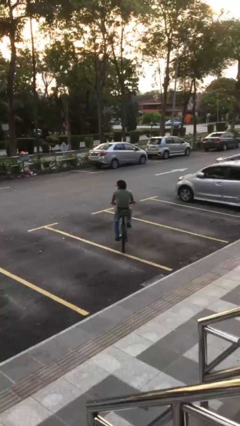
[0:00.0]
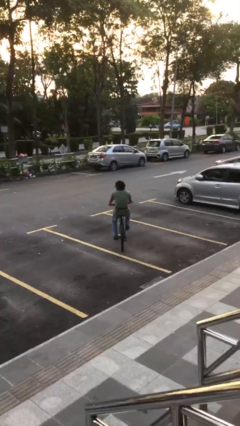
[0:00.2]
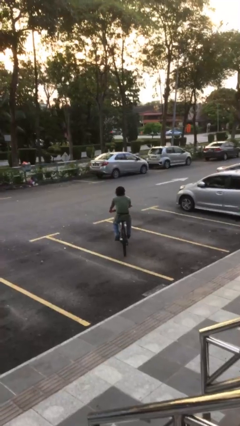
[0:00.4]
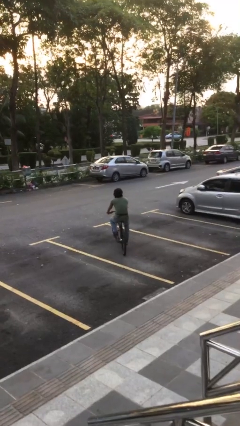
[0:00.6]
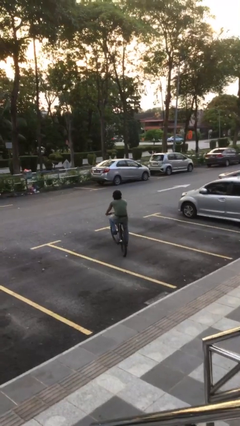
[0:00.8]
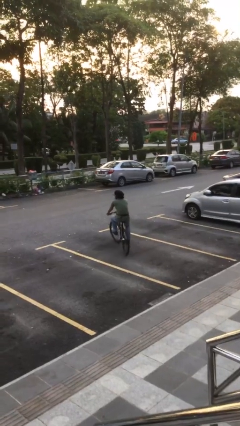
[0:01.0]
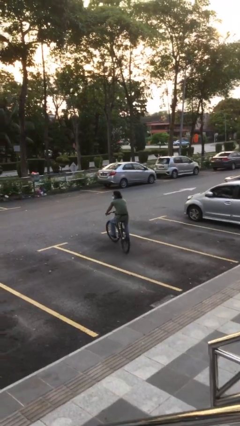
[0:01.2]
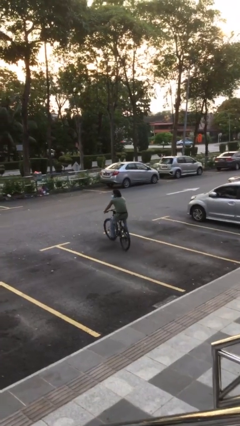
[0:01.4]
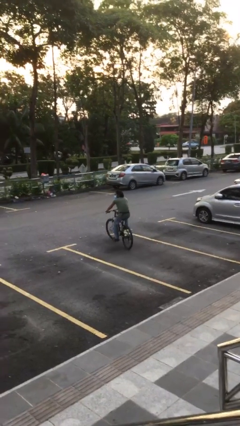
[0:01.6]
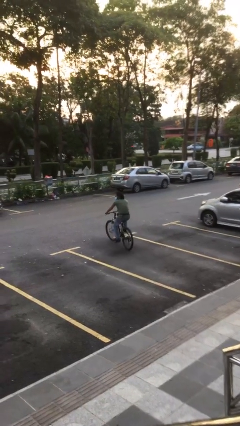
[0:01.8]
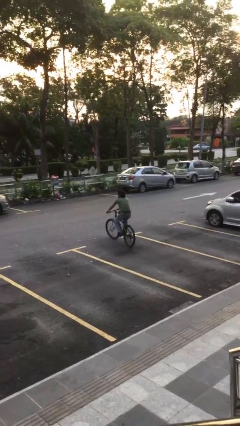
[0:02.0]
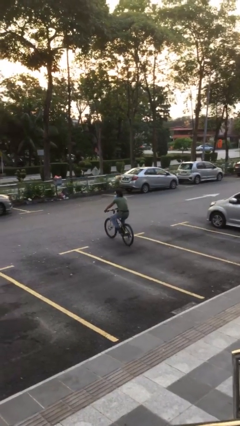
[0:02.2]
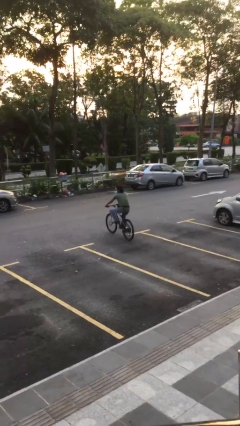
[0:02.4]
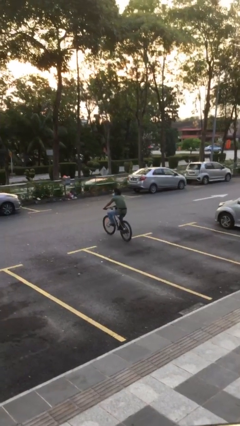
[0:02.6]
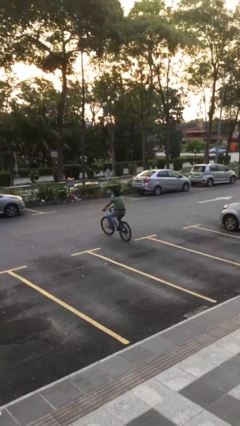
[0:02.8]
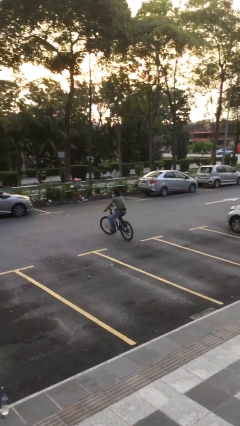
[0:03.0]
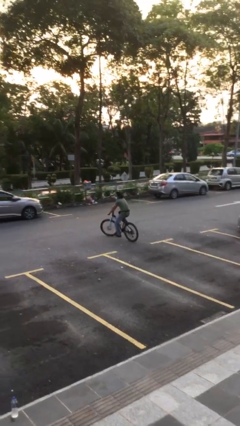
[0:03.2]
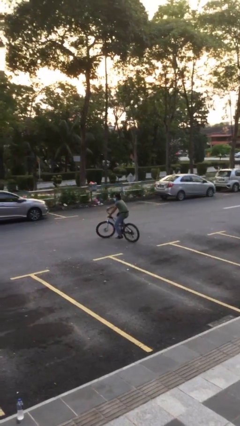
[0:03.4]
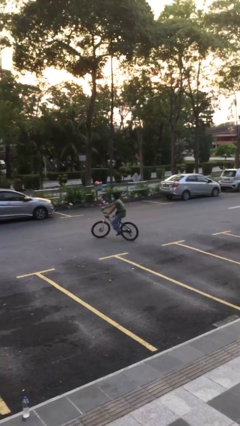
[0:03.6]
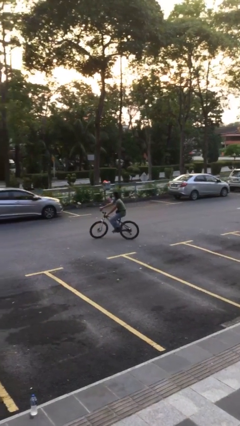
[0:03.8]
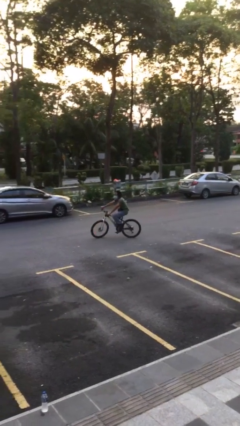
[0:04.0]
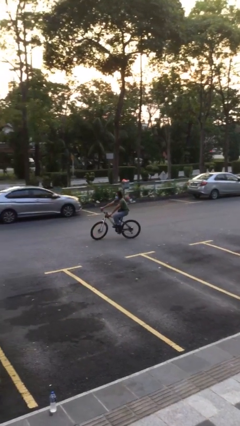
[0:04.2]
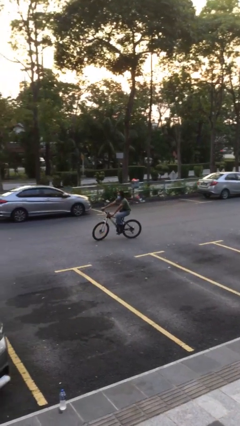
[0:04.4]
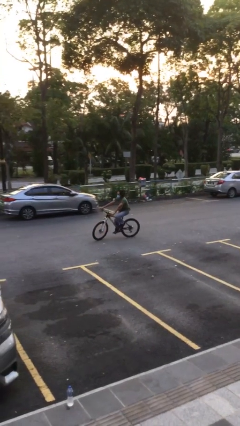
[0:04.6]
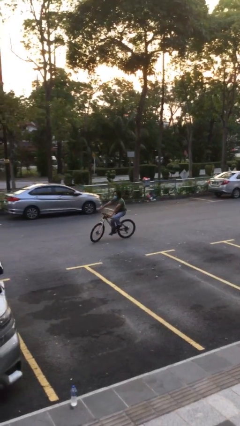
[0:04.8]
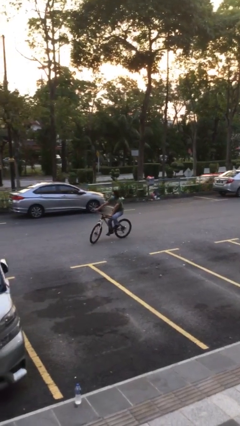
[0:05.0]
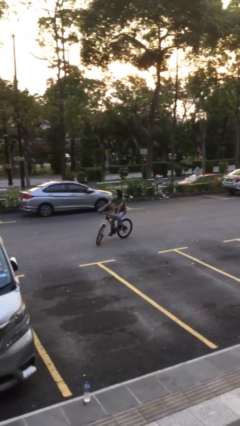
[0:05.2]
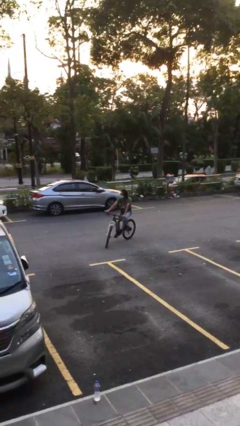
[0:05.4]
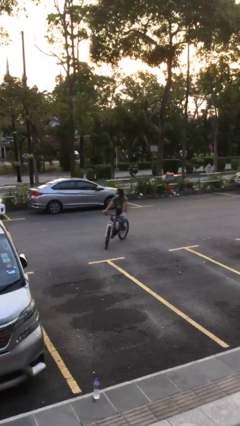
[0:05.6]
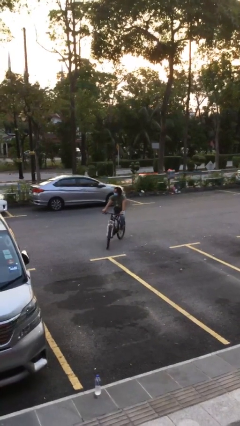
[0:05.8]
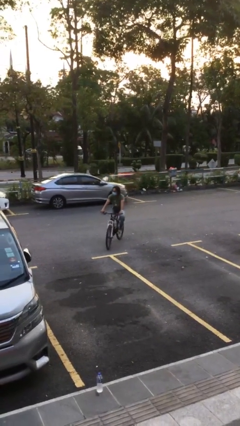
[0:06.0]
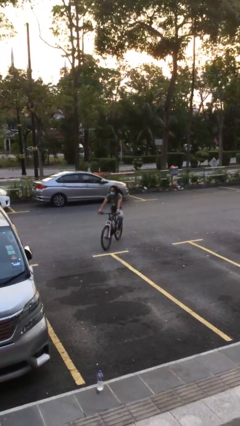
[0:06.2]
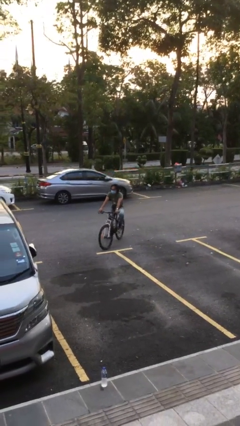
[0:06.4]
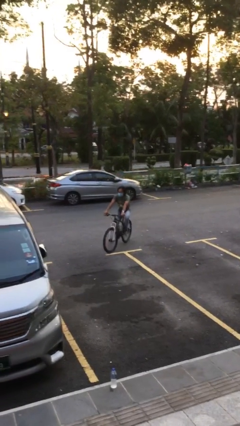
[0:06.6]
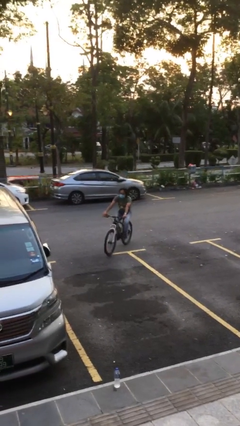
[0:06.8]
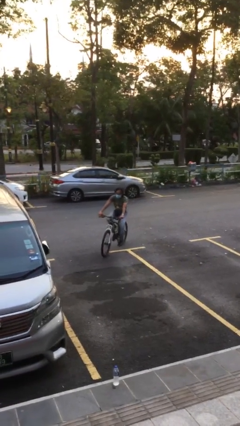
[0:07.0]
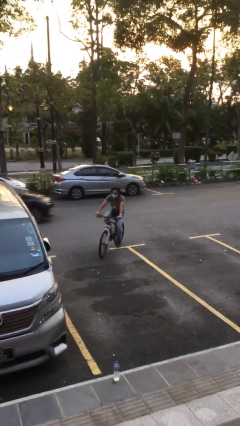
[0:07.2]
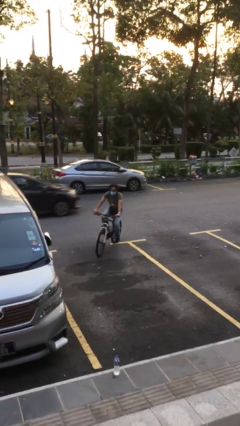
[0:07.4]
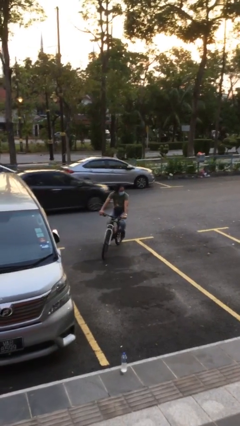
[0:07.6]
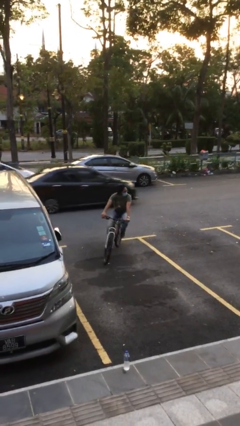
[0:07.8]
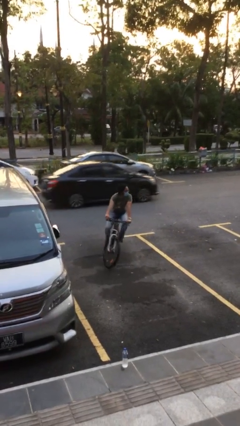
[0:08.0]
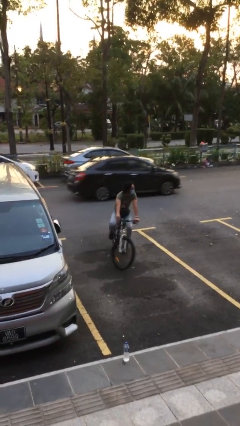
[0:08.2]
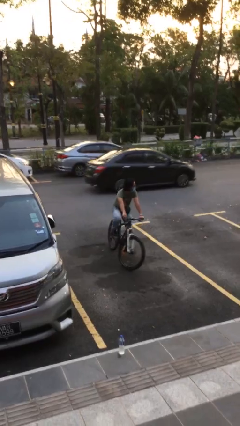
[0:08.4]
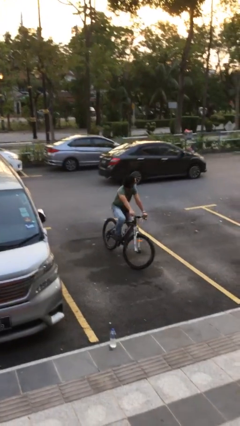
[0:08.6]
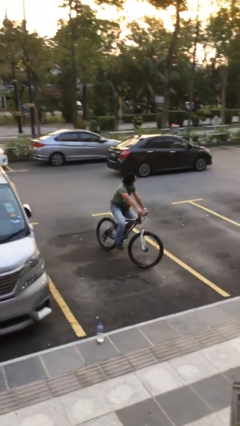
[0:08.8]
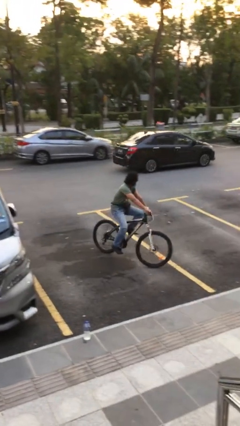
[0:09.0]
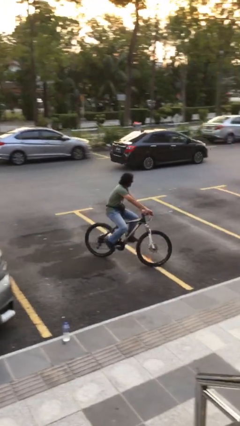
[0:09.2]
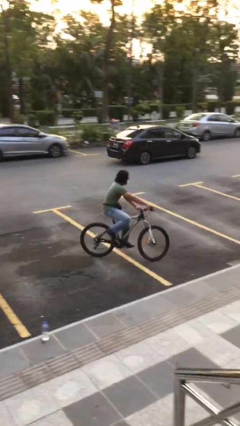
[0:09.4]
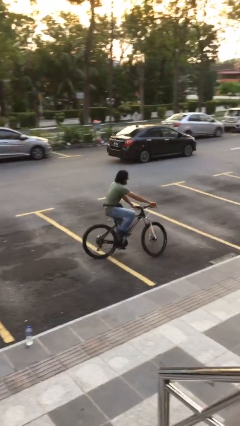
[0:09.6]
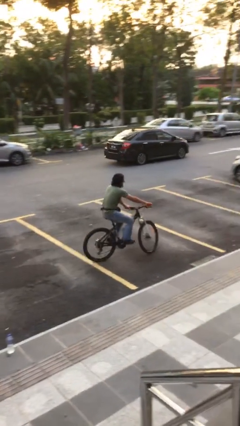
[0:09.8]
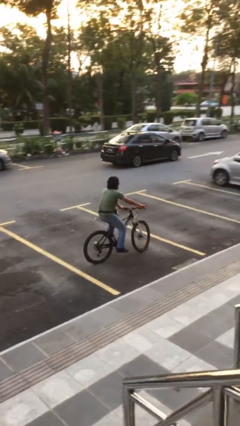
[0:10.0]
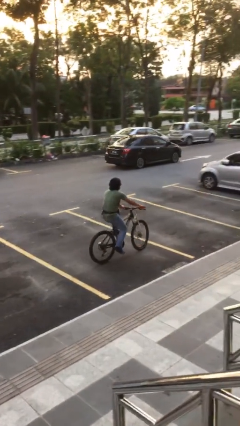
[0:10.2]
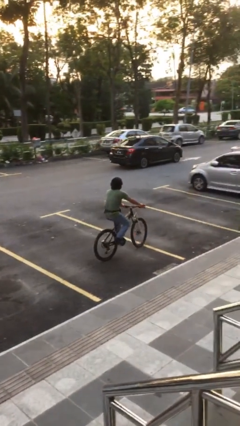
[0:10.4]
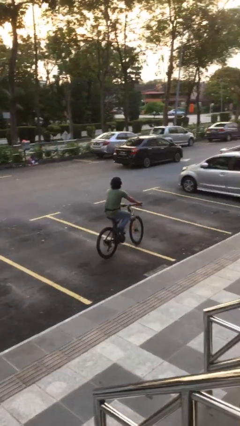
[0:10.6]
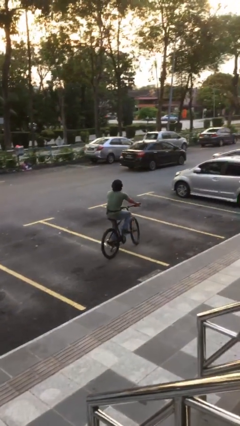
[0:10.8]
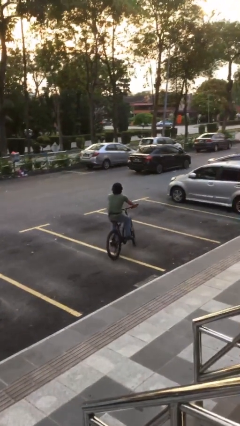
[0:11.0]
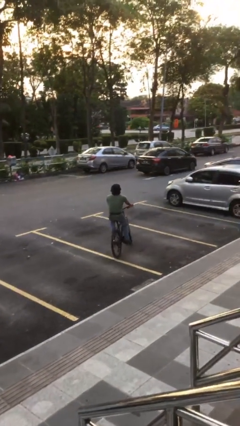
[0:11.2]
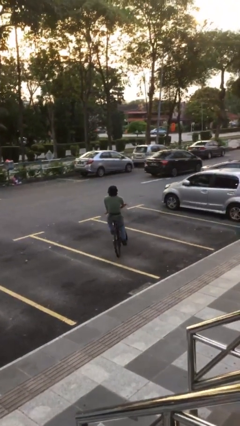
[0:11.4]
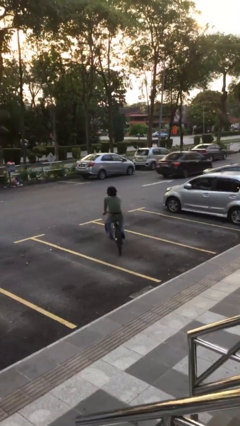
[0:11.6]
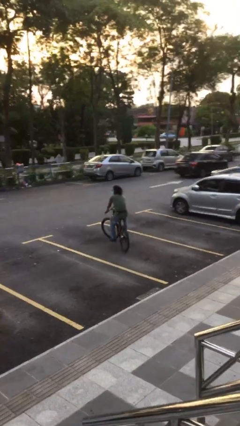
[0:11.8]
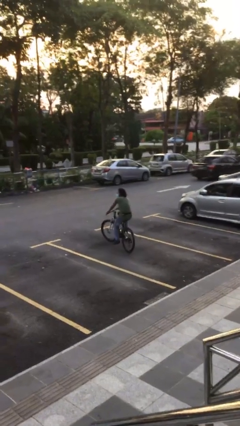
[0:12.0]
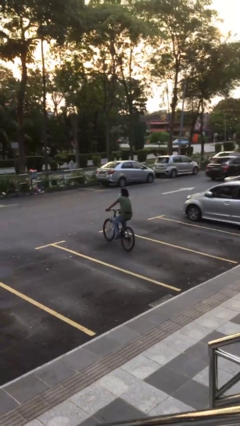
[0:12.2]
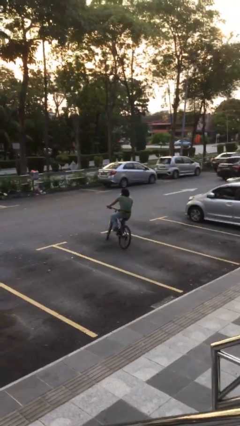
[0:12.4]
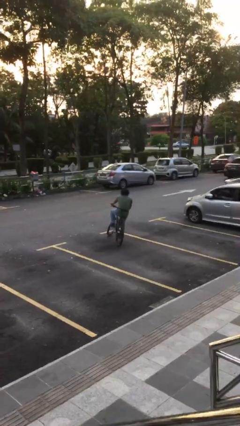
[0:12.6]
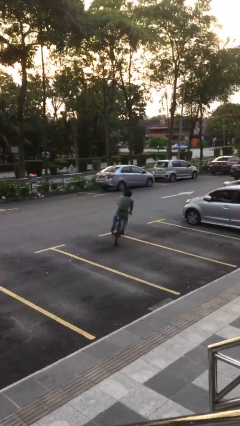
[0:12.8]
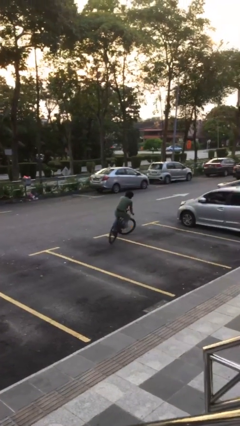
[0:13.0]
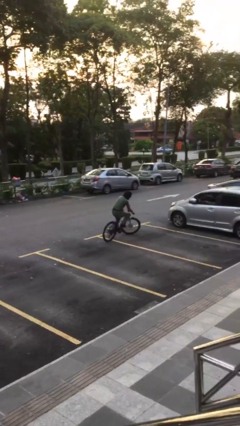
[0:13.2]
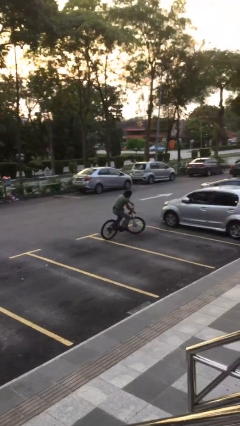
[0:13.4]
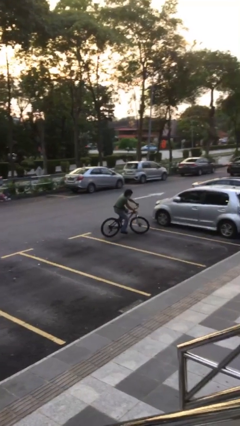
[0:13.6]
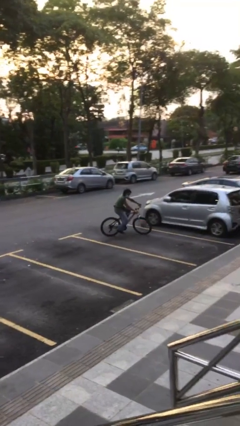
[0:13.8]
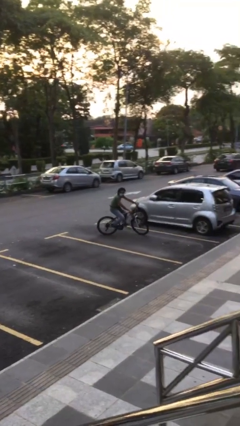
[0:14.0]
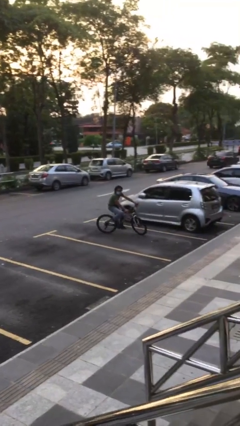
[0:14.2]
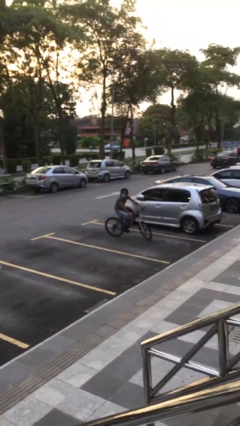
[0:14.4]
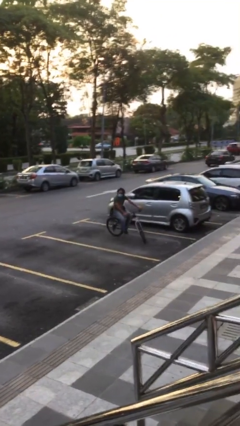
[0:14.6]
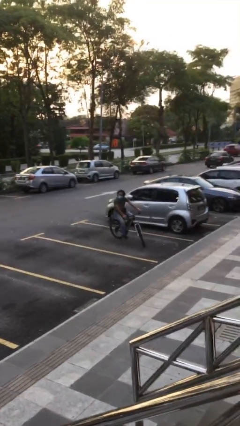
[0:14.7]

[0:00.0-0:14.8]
person rides bicycle

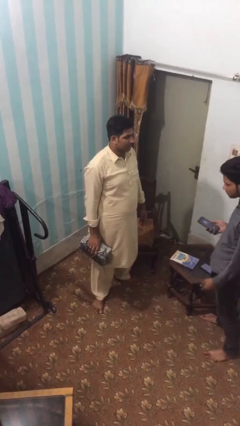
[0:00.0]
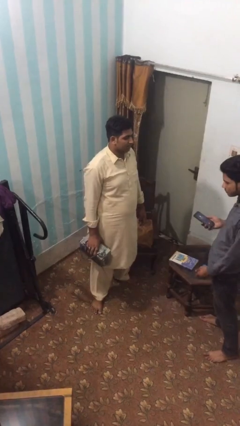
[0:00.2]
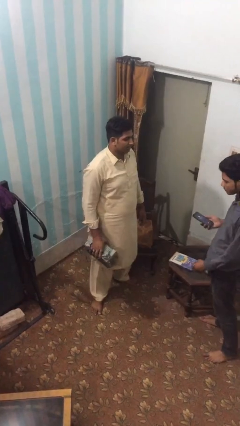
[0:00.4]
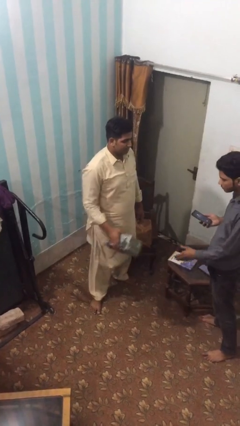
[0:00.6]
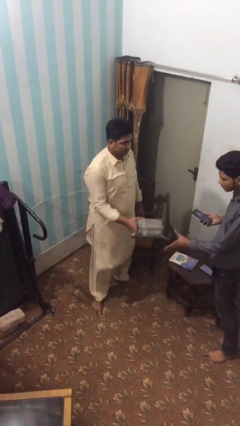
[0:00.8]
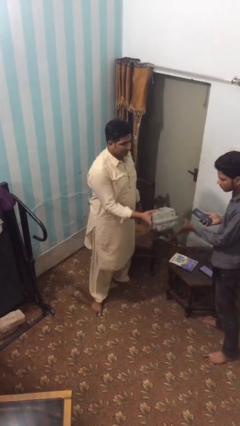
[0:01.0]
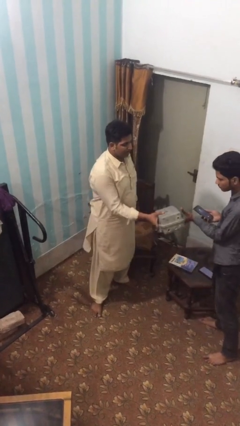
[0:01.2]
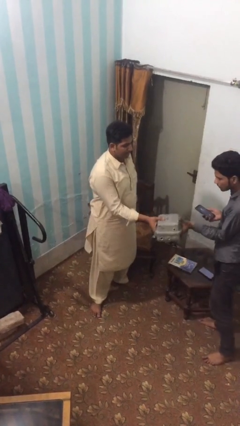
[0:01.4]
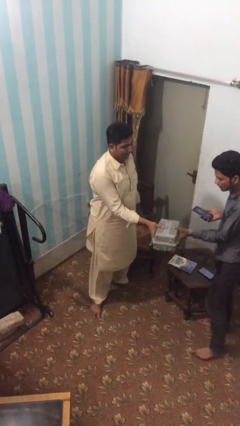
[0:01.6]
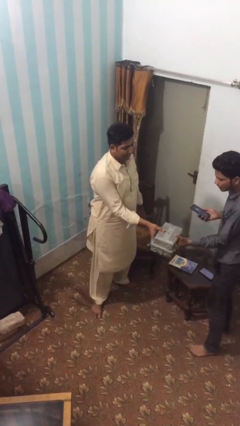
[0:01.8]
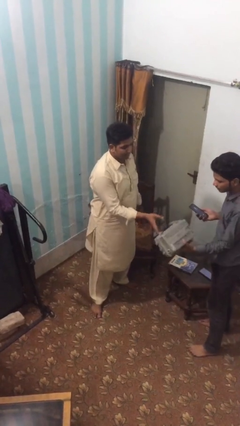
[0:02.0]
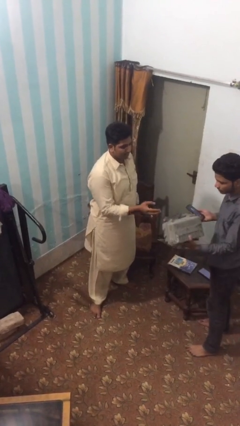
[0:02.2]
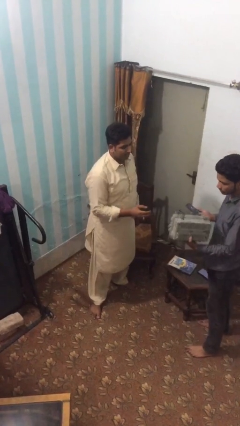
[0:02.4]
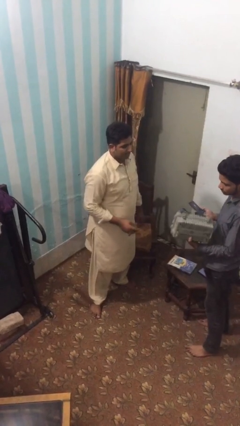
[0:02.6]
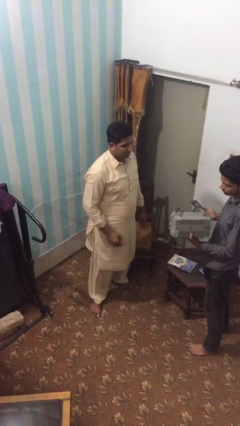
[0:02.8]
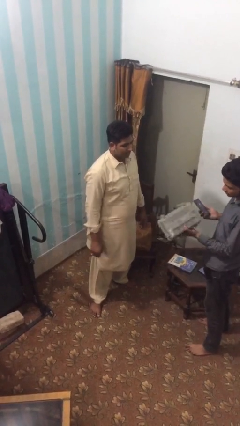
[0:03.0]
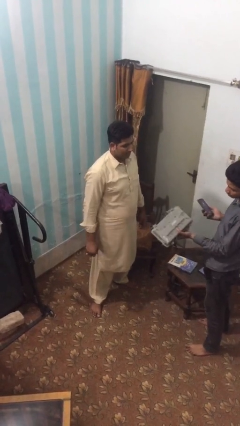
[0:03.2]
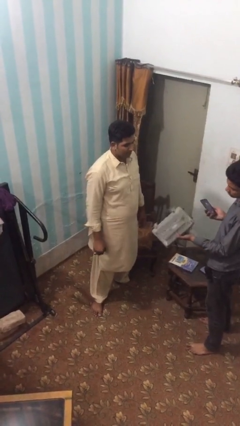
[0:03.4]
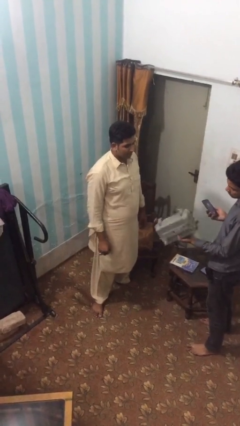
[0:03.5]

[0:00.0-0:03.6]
person transfers object to person
